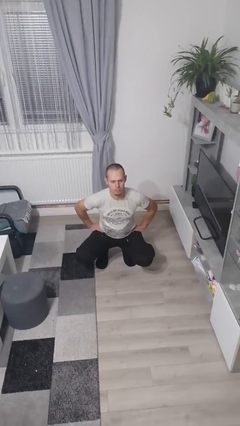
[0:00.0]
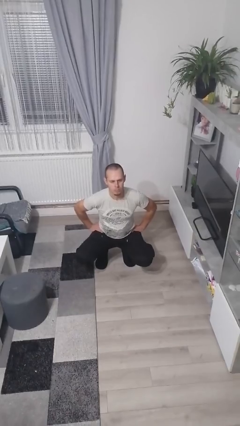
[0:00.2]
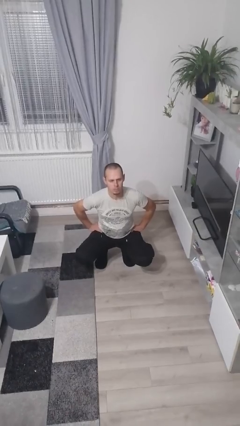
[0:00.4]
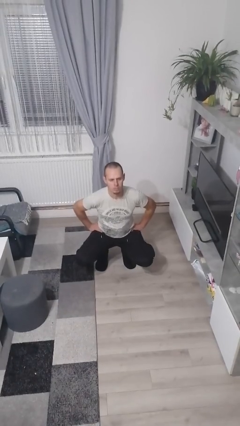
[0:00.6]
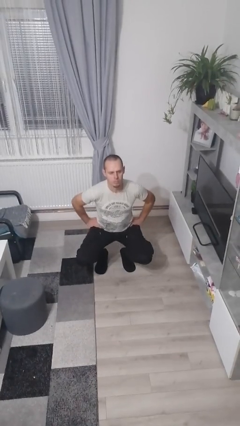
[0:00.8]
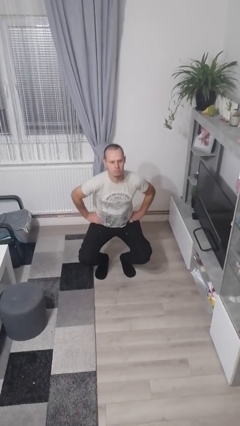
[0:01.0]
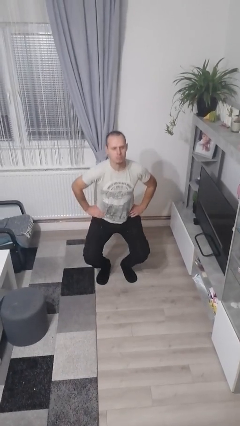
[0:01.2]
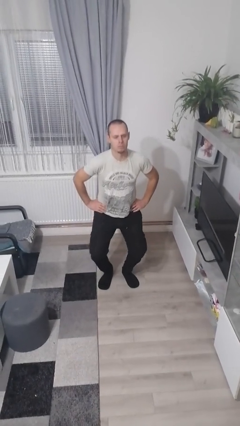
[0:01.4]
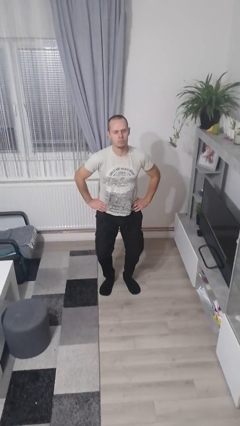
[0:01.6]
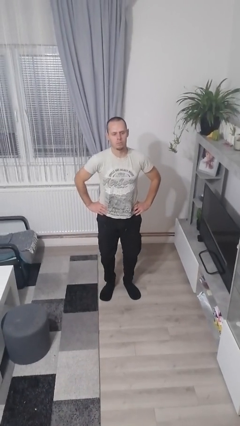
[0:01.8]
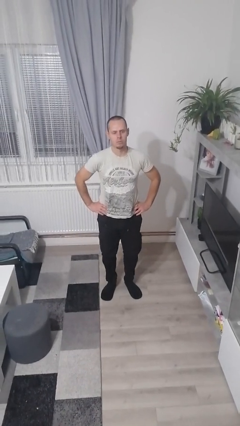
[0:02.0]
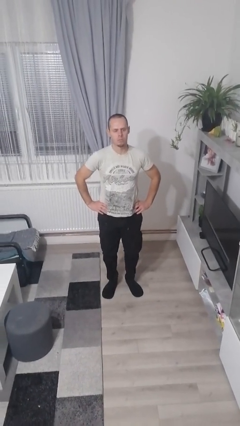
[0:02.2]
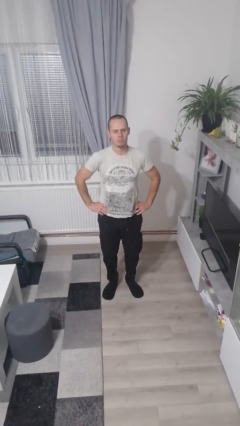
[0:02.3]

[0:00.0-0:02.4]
person stands up

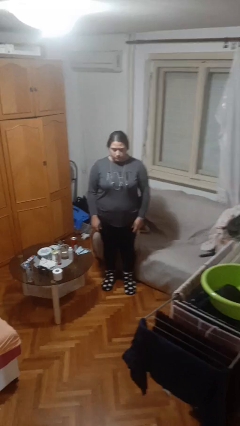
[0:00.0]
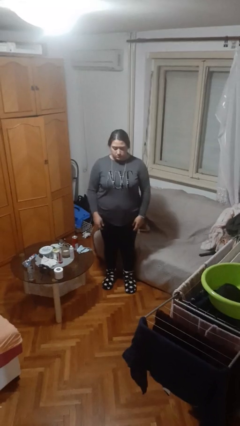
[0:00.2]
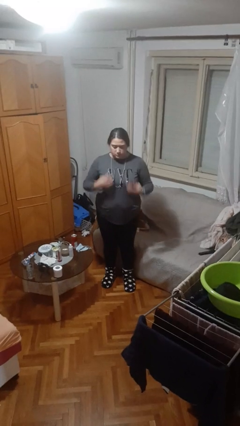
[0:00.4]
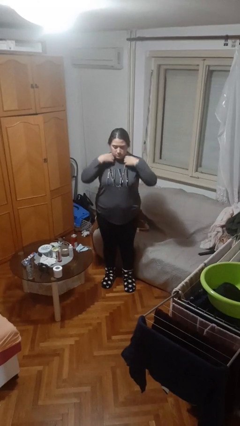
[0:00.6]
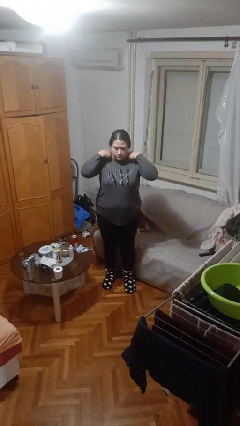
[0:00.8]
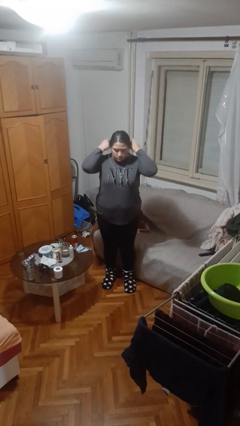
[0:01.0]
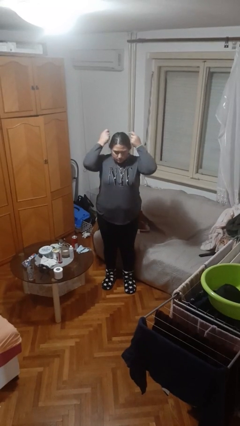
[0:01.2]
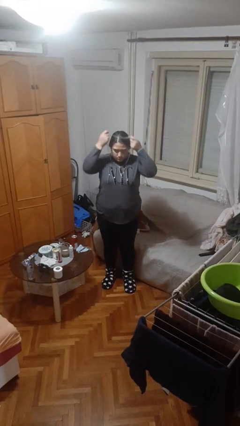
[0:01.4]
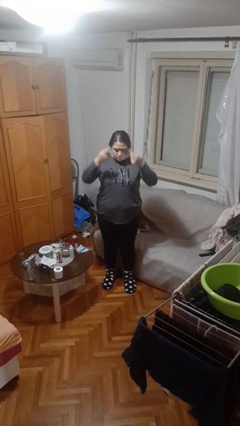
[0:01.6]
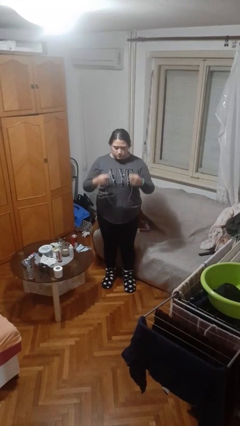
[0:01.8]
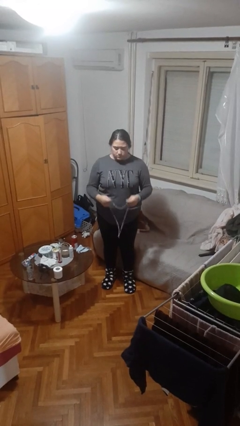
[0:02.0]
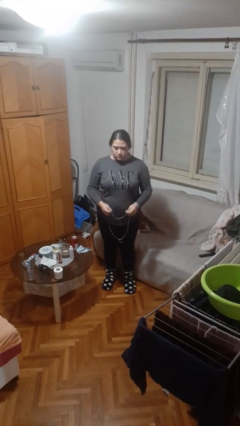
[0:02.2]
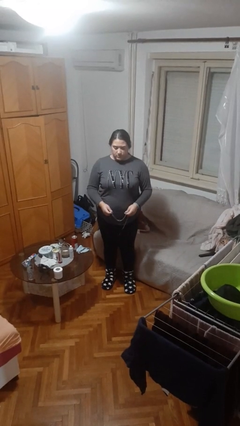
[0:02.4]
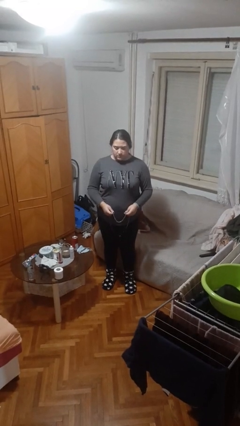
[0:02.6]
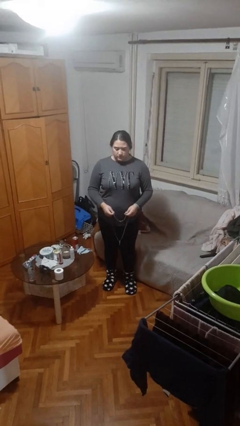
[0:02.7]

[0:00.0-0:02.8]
person takes off necklace

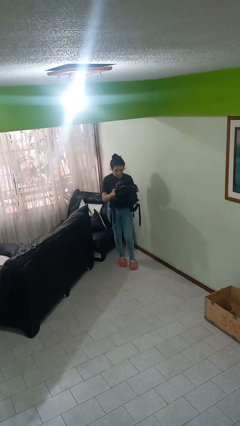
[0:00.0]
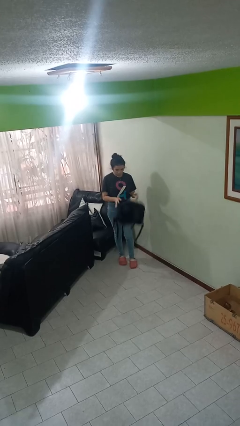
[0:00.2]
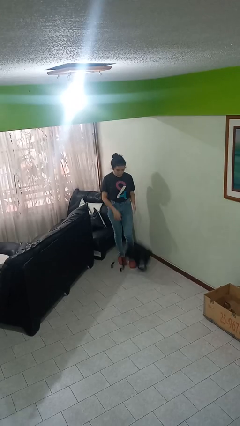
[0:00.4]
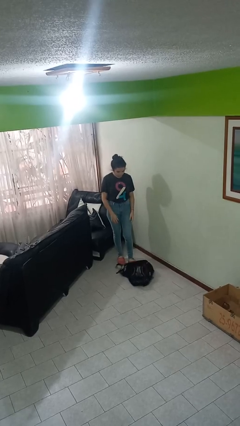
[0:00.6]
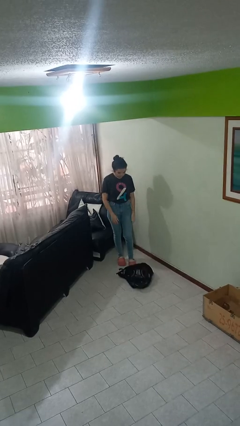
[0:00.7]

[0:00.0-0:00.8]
person drops object

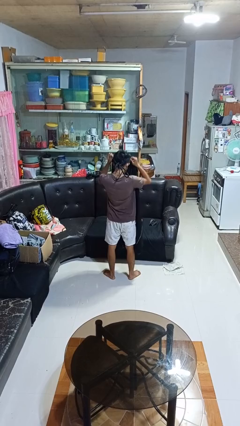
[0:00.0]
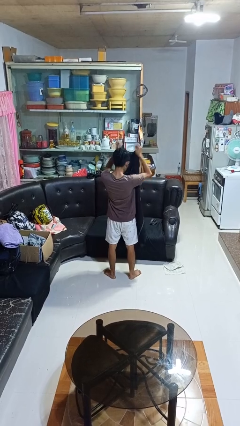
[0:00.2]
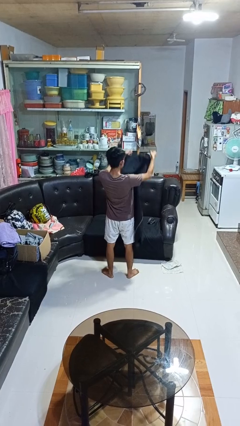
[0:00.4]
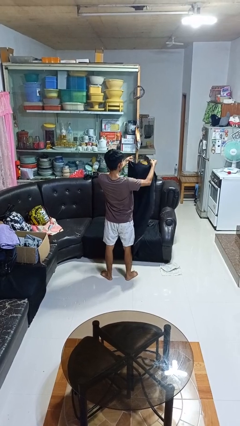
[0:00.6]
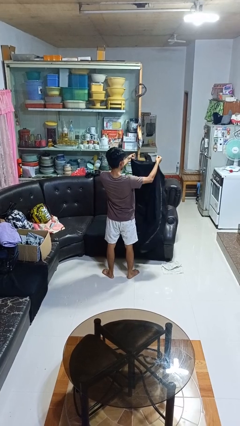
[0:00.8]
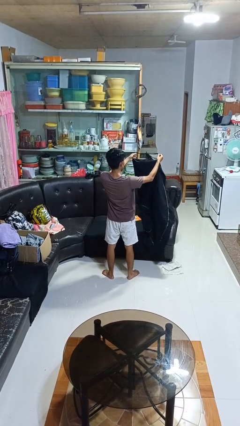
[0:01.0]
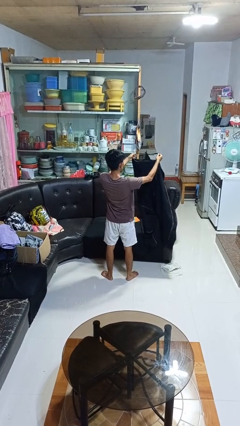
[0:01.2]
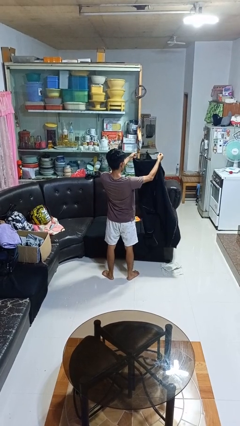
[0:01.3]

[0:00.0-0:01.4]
person takes off apron

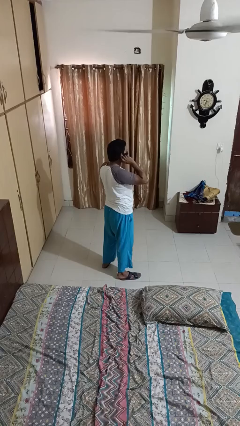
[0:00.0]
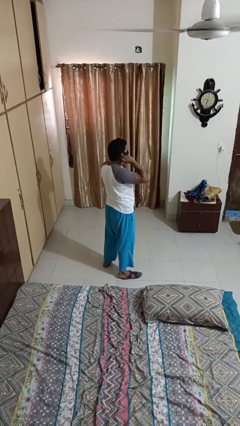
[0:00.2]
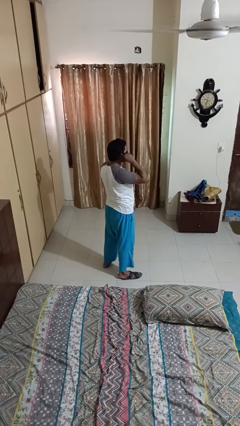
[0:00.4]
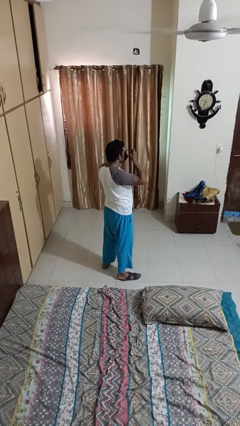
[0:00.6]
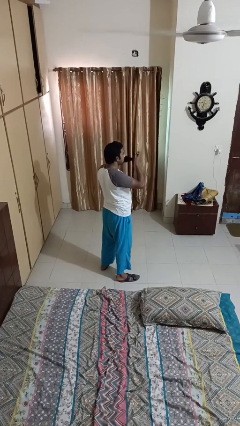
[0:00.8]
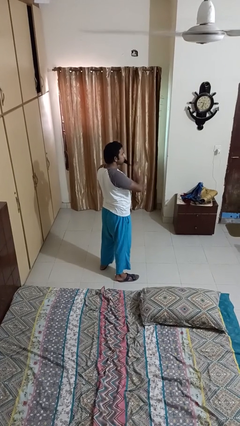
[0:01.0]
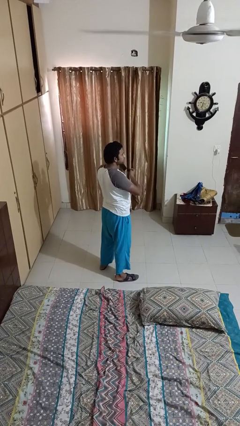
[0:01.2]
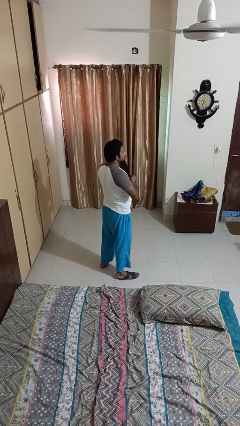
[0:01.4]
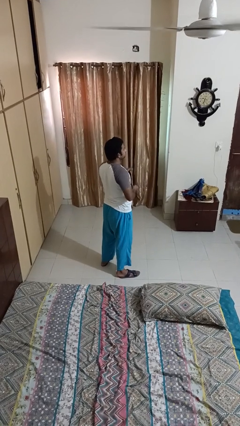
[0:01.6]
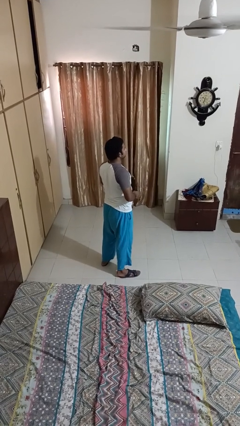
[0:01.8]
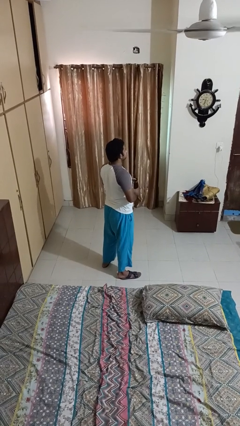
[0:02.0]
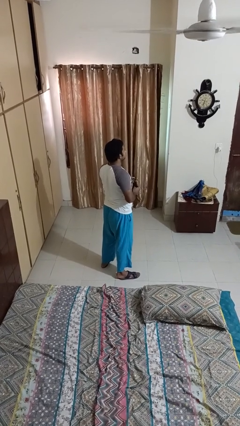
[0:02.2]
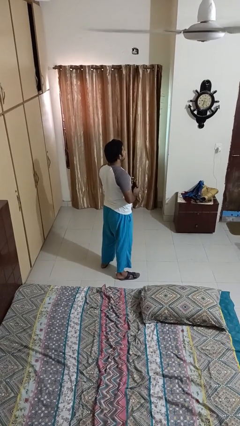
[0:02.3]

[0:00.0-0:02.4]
person takes off facemask

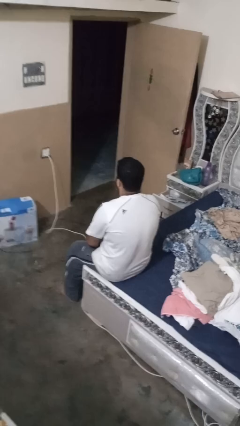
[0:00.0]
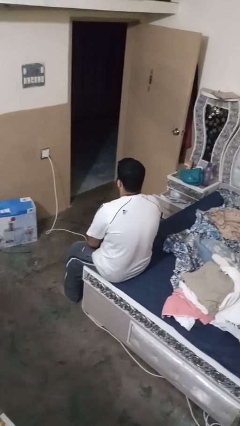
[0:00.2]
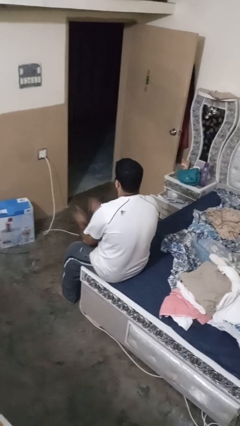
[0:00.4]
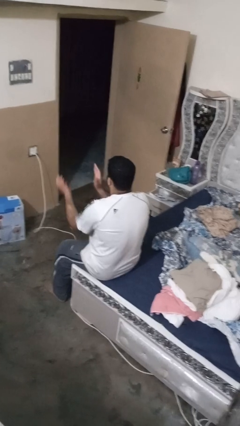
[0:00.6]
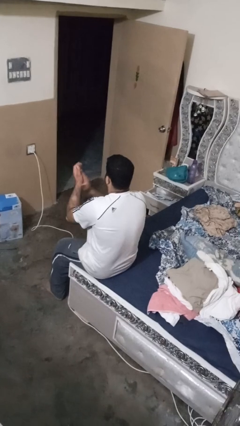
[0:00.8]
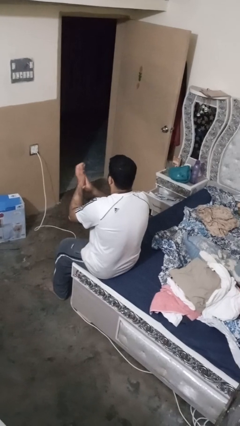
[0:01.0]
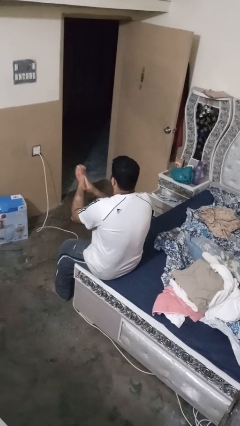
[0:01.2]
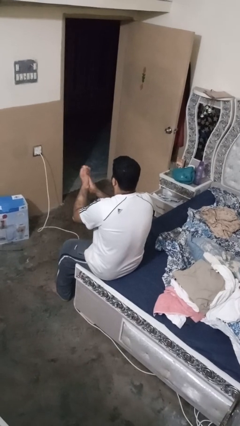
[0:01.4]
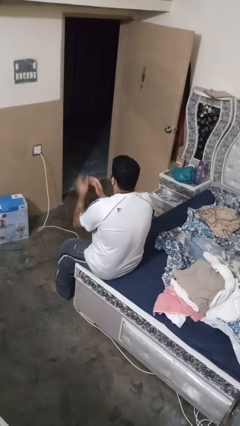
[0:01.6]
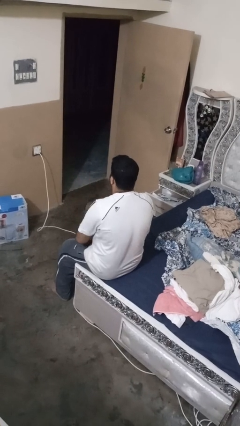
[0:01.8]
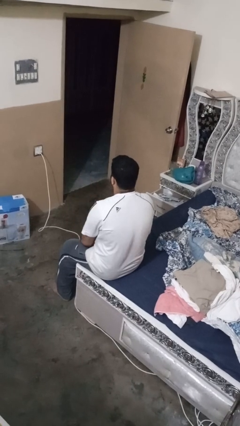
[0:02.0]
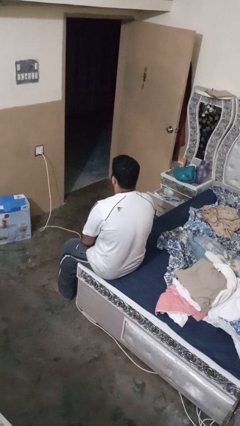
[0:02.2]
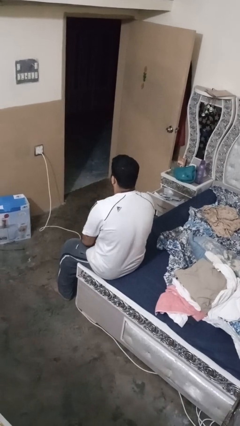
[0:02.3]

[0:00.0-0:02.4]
person claps hands

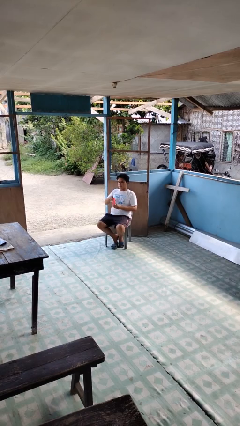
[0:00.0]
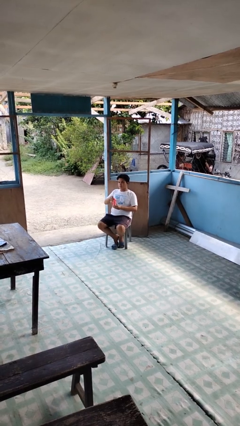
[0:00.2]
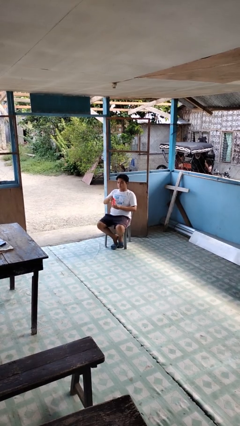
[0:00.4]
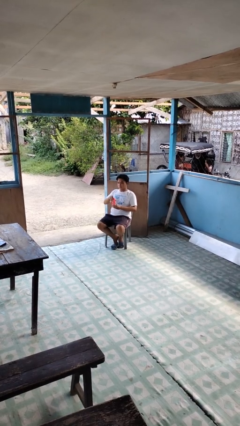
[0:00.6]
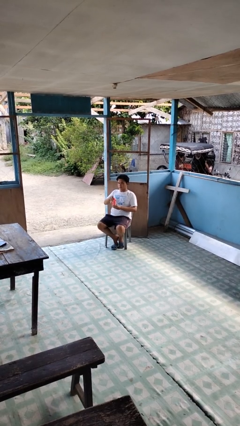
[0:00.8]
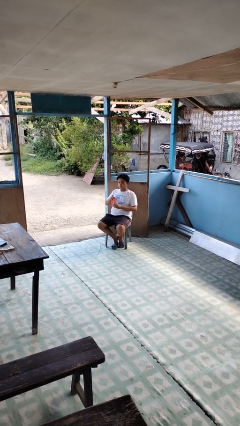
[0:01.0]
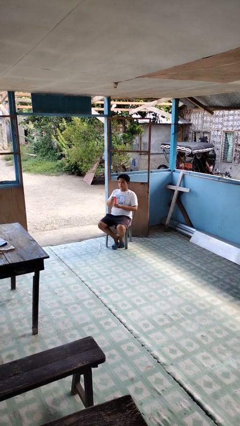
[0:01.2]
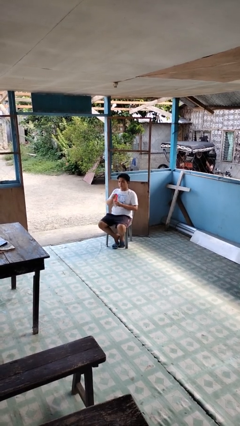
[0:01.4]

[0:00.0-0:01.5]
person opens beverage can

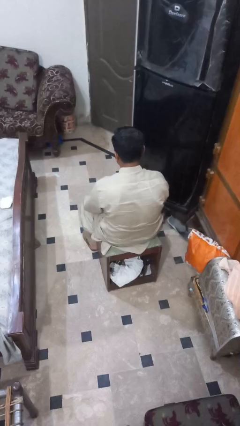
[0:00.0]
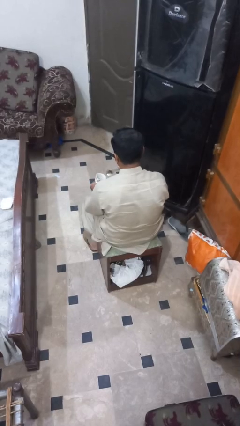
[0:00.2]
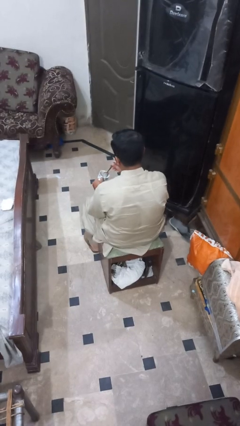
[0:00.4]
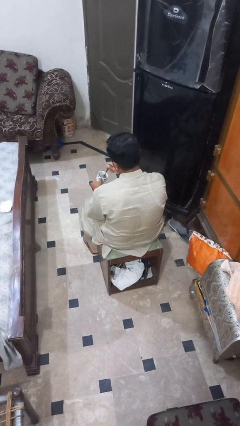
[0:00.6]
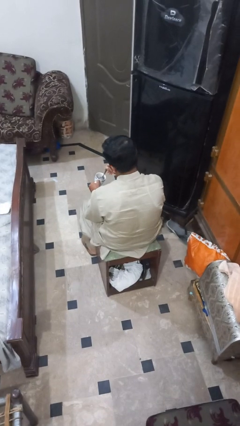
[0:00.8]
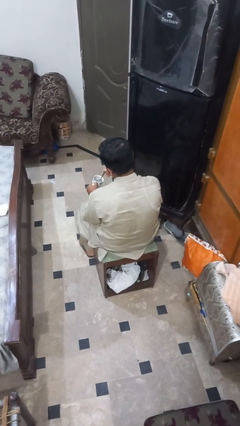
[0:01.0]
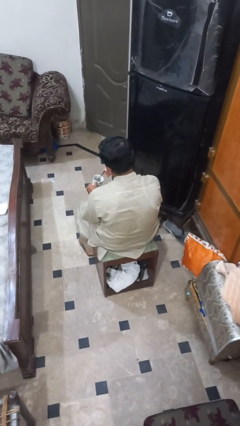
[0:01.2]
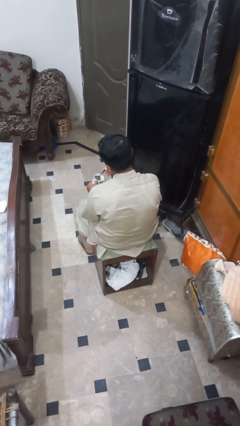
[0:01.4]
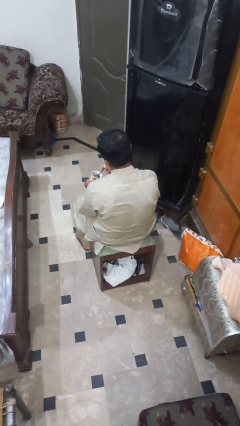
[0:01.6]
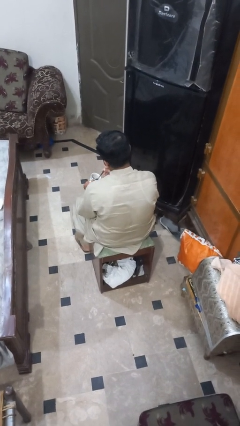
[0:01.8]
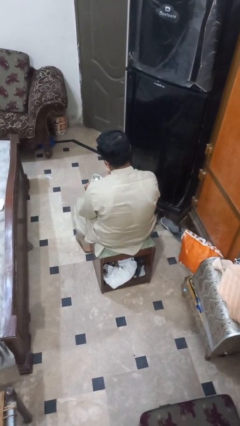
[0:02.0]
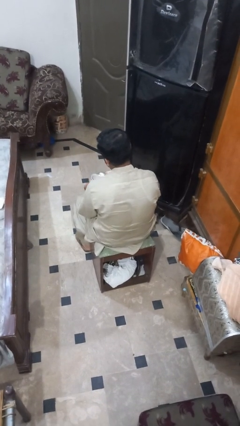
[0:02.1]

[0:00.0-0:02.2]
person stirs mug

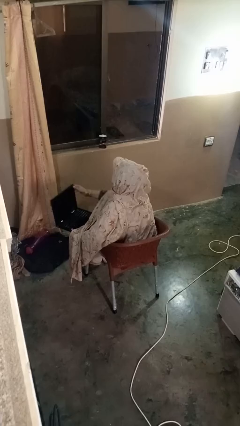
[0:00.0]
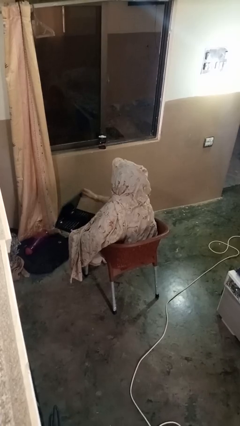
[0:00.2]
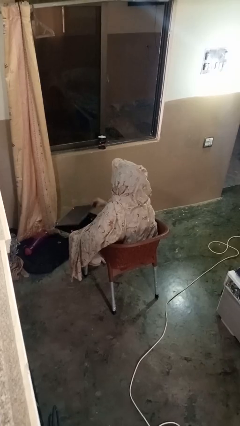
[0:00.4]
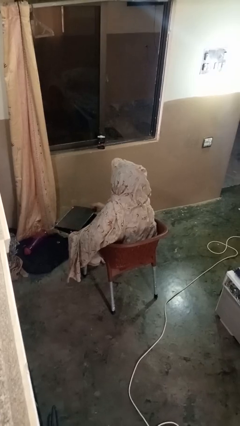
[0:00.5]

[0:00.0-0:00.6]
person opens laptop

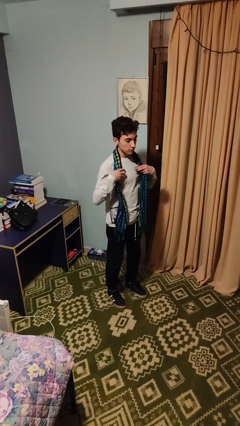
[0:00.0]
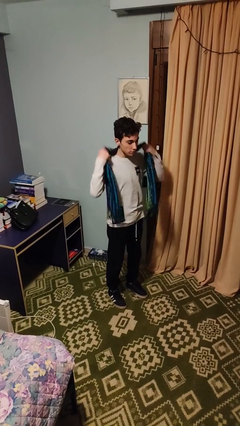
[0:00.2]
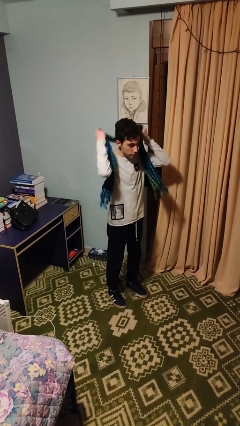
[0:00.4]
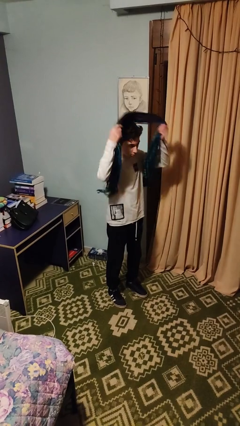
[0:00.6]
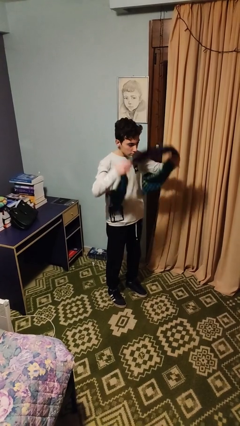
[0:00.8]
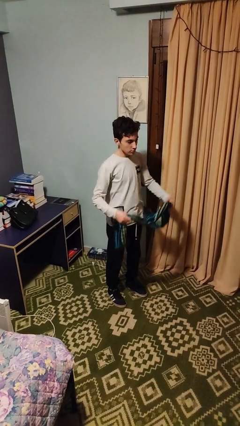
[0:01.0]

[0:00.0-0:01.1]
person takes off scarf
